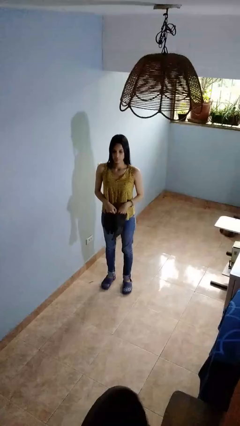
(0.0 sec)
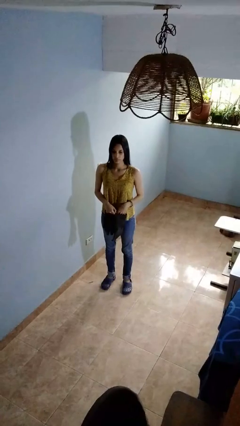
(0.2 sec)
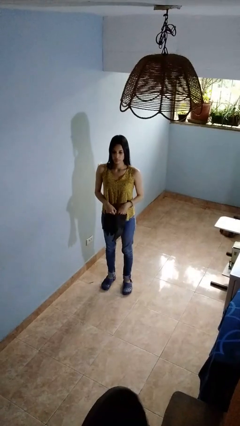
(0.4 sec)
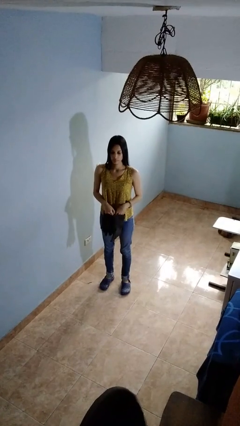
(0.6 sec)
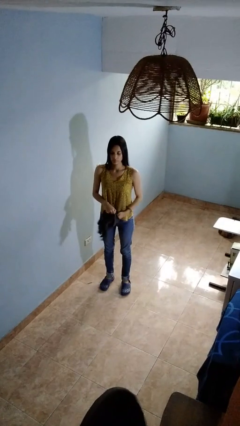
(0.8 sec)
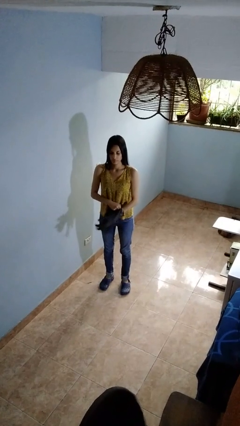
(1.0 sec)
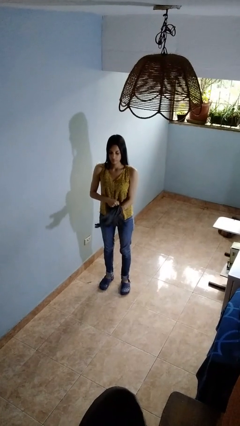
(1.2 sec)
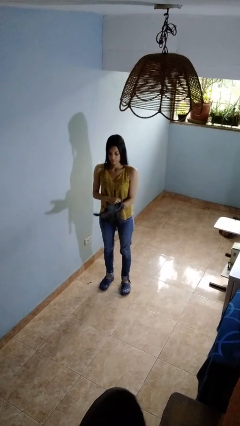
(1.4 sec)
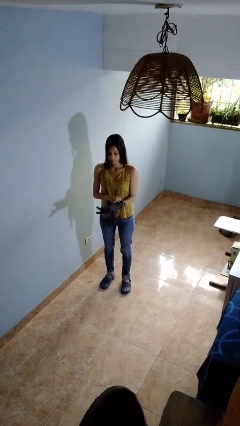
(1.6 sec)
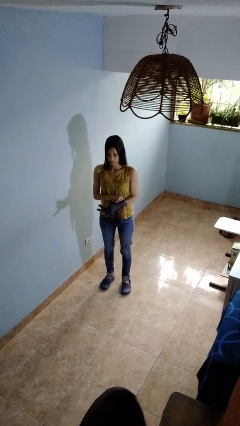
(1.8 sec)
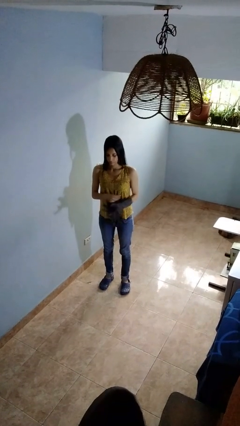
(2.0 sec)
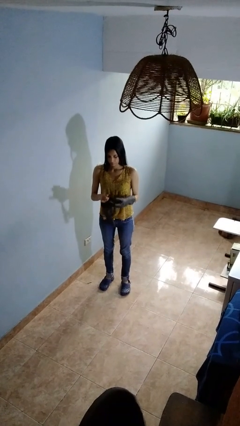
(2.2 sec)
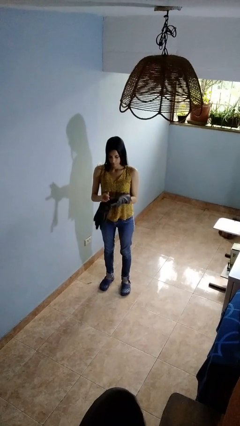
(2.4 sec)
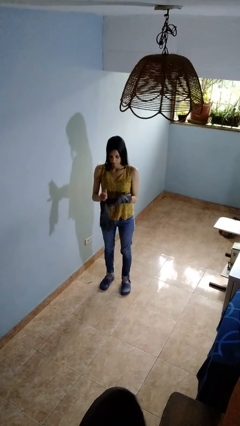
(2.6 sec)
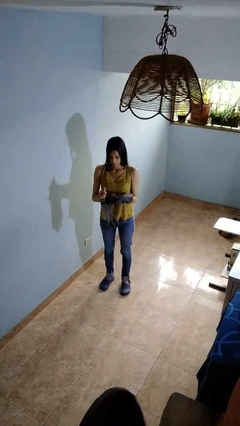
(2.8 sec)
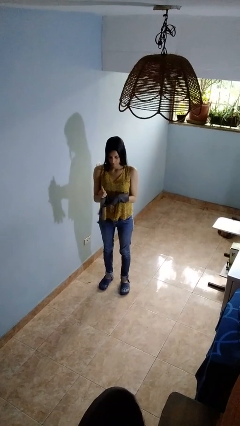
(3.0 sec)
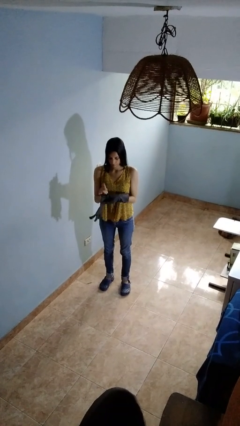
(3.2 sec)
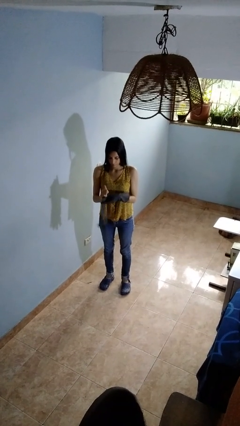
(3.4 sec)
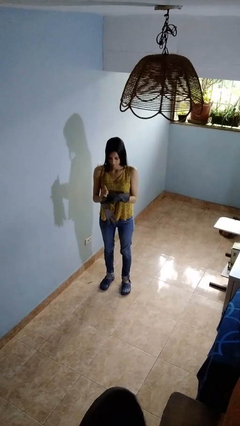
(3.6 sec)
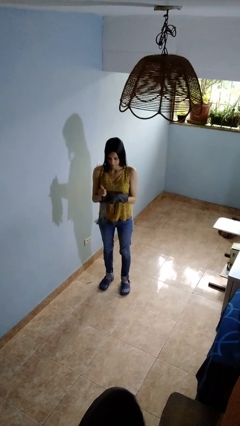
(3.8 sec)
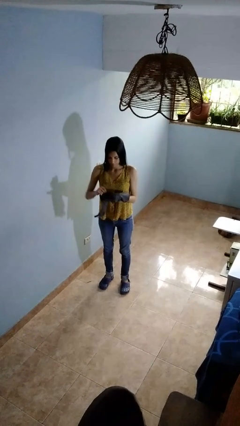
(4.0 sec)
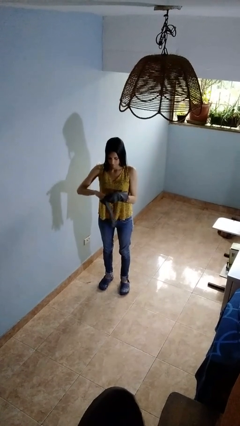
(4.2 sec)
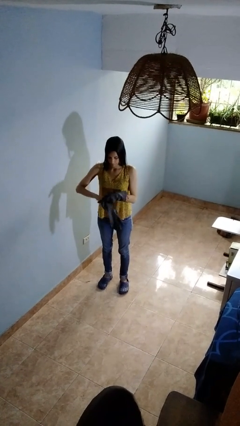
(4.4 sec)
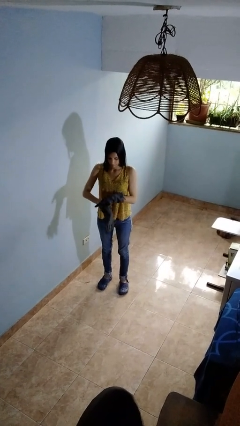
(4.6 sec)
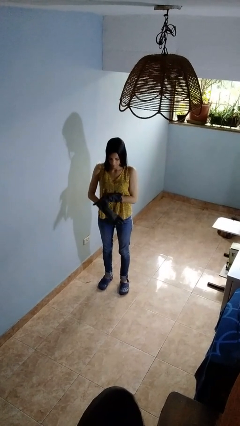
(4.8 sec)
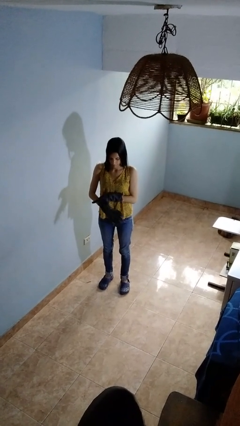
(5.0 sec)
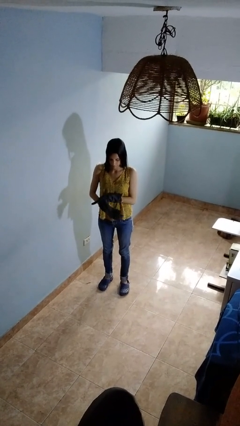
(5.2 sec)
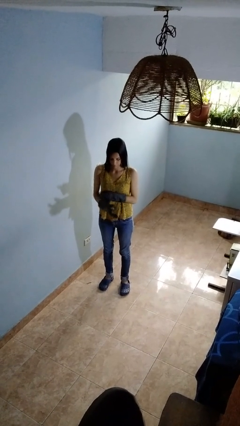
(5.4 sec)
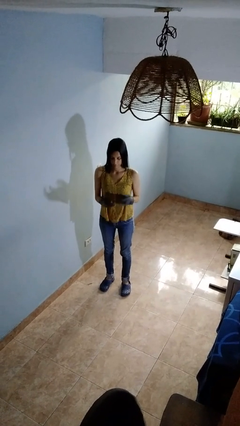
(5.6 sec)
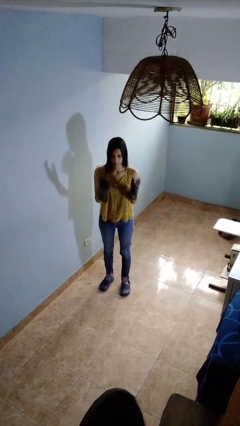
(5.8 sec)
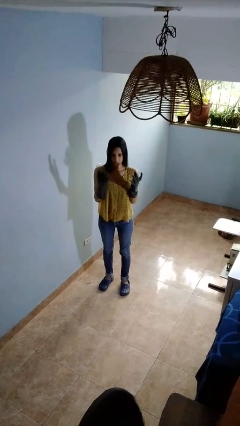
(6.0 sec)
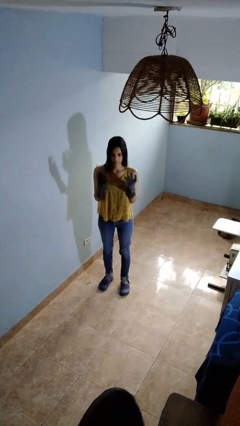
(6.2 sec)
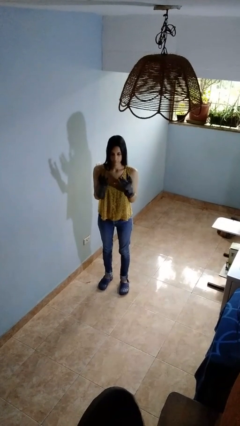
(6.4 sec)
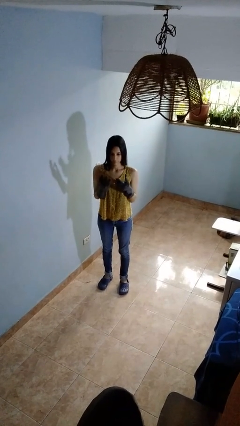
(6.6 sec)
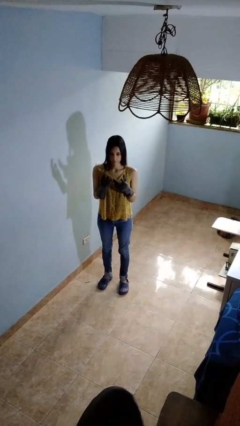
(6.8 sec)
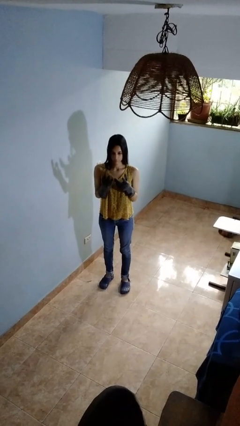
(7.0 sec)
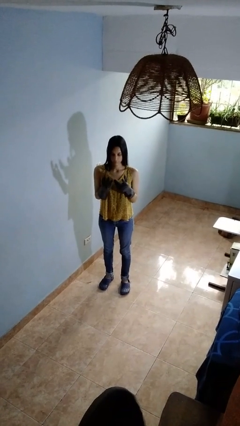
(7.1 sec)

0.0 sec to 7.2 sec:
person puts on gloves

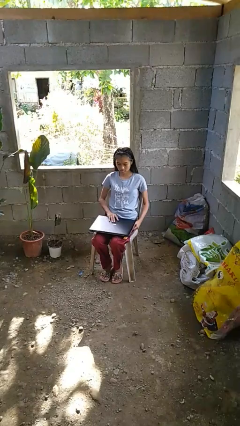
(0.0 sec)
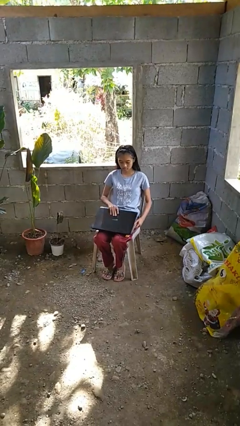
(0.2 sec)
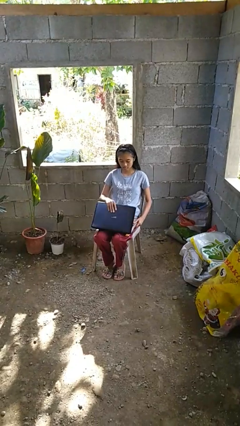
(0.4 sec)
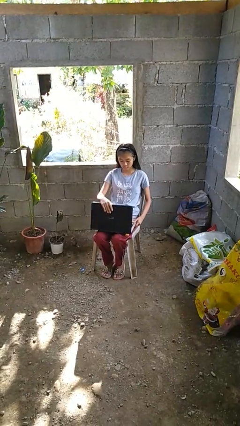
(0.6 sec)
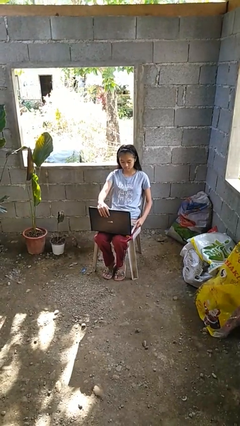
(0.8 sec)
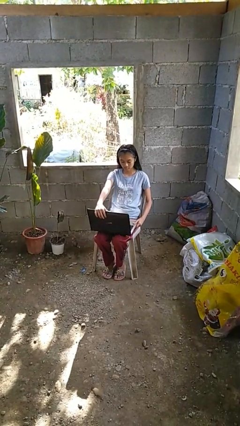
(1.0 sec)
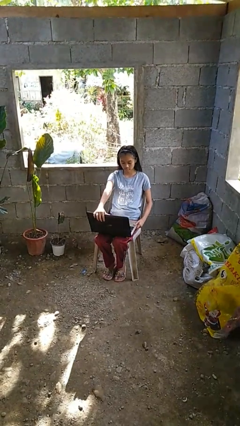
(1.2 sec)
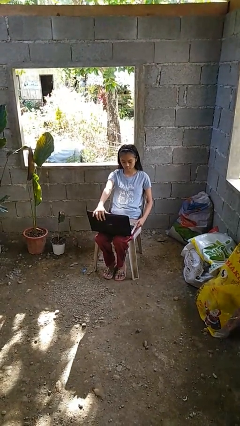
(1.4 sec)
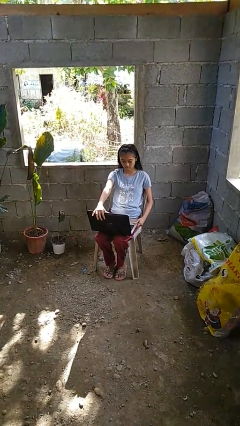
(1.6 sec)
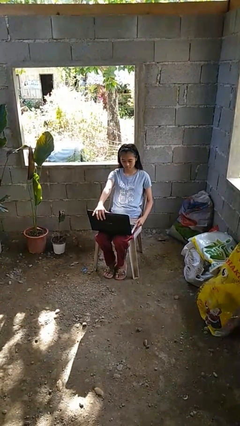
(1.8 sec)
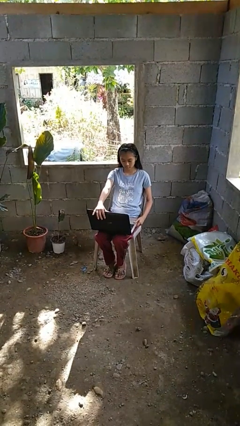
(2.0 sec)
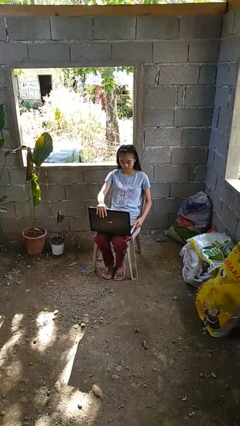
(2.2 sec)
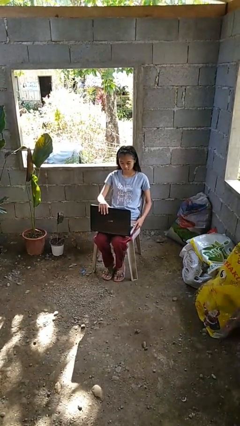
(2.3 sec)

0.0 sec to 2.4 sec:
person opens laptop

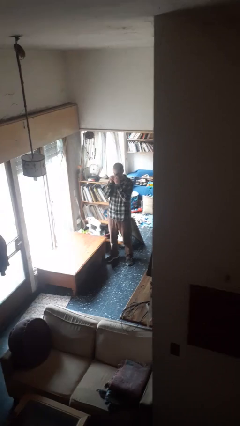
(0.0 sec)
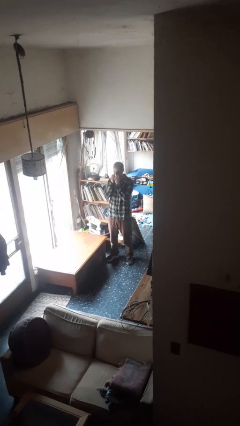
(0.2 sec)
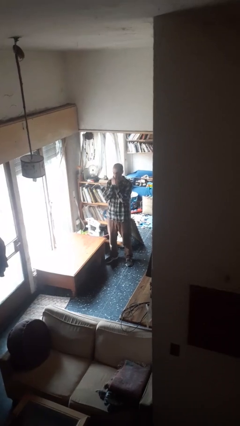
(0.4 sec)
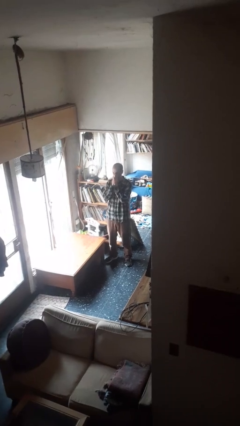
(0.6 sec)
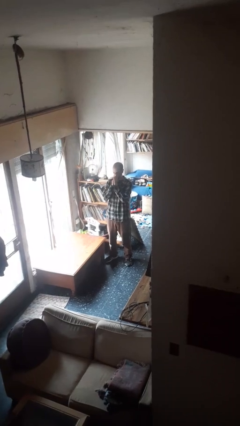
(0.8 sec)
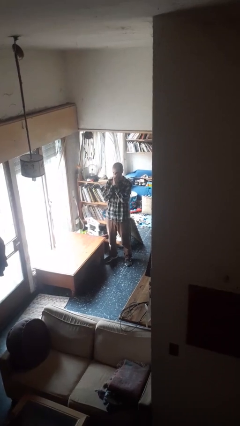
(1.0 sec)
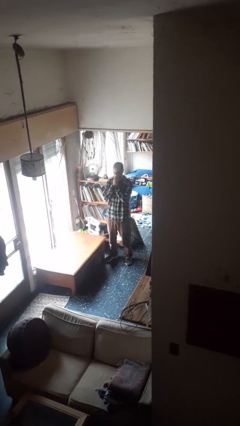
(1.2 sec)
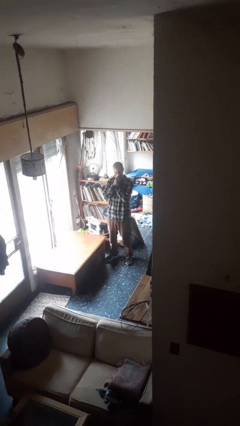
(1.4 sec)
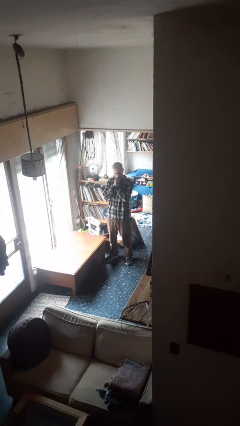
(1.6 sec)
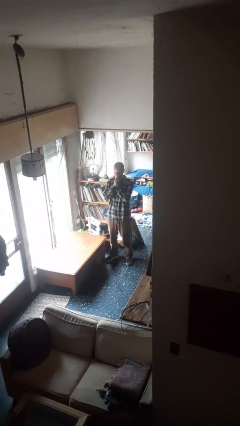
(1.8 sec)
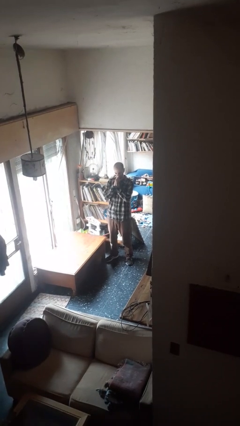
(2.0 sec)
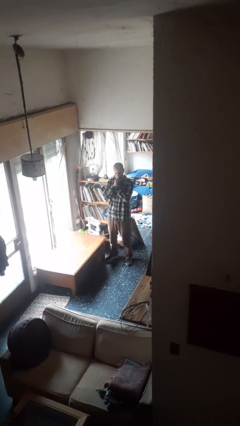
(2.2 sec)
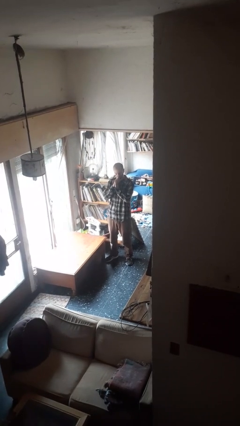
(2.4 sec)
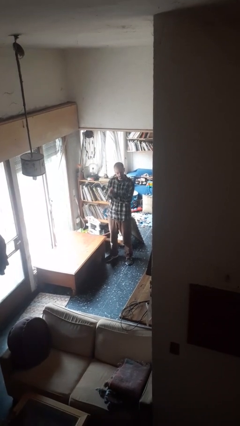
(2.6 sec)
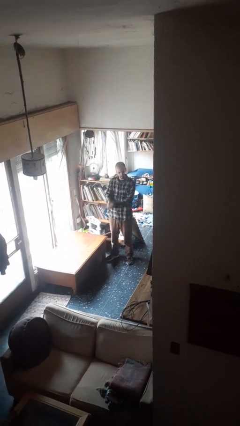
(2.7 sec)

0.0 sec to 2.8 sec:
person blows nose

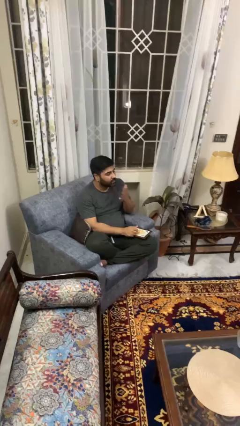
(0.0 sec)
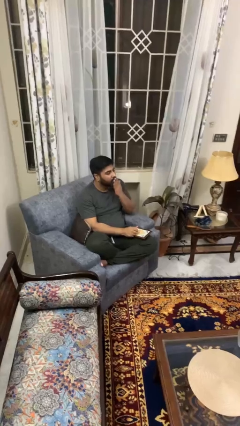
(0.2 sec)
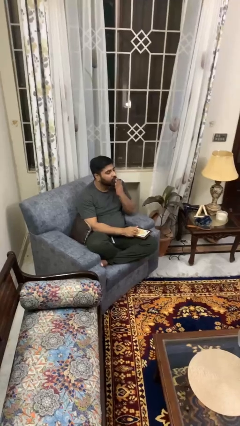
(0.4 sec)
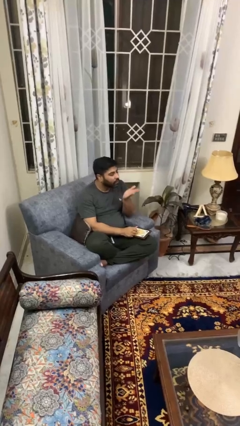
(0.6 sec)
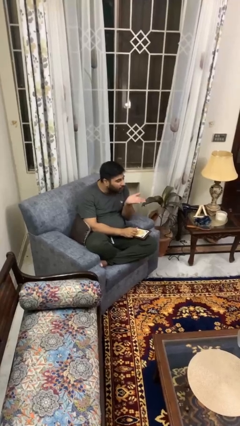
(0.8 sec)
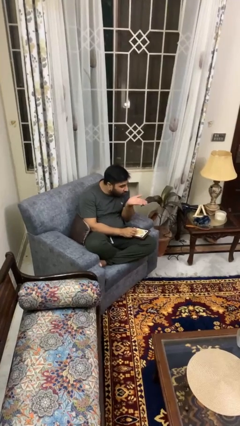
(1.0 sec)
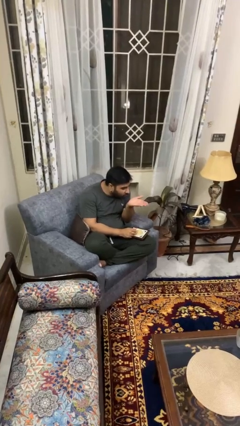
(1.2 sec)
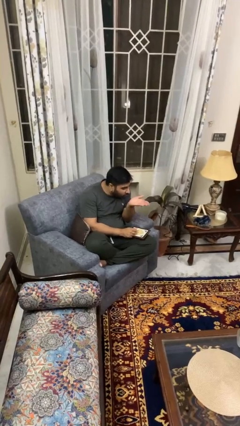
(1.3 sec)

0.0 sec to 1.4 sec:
person gestures blow kiss

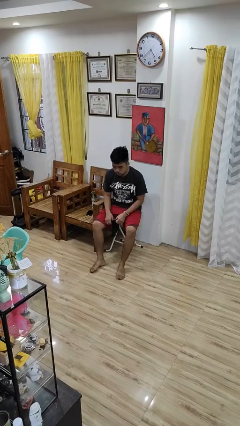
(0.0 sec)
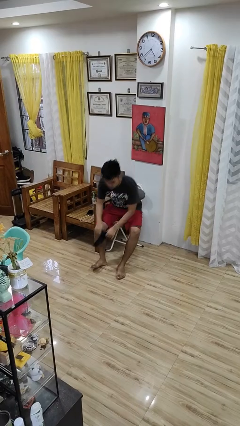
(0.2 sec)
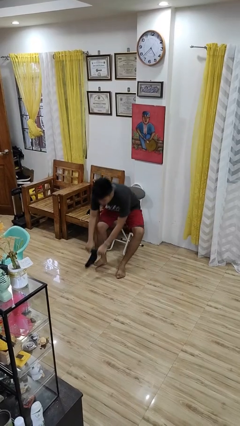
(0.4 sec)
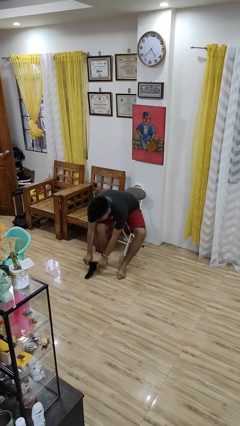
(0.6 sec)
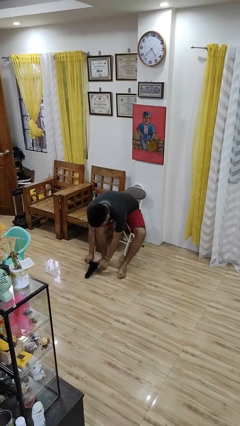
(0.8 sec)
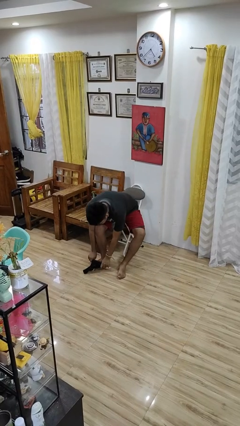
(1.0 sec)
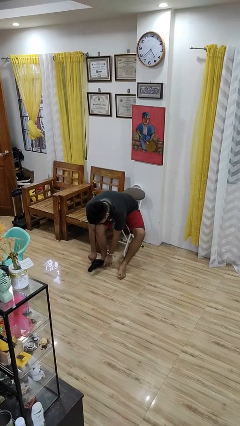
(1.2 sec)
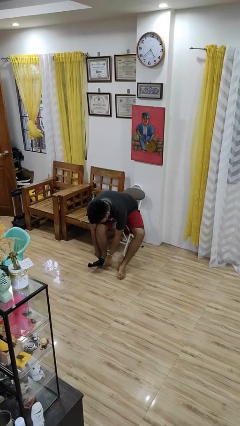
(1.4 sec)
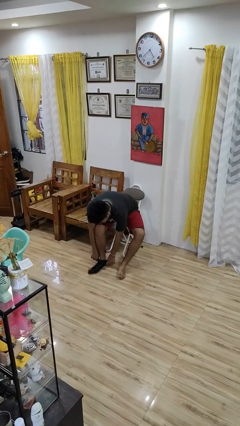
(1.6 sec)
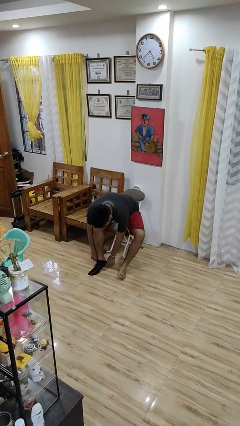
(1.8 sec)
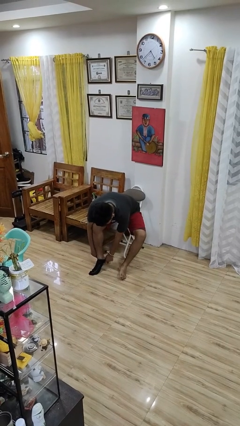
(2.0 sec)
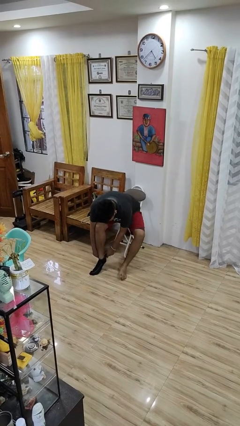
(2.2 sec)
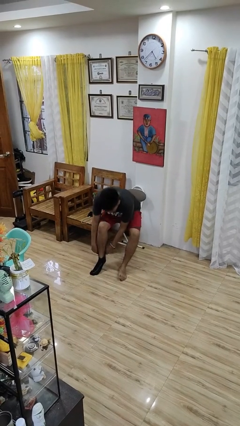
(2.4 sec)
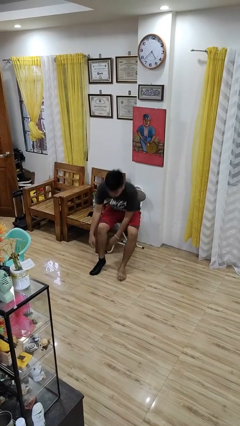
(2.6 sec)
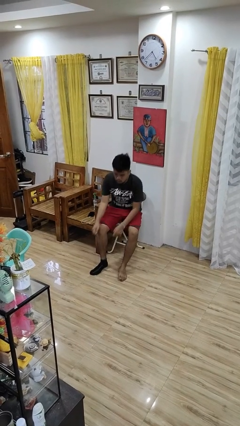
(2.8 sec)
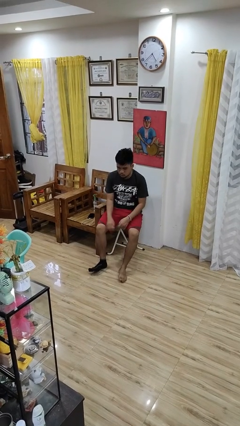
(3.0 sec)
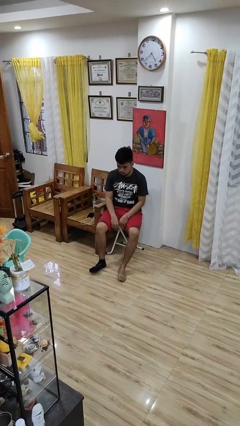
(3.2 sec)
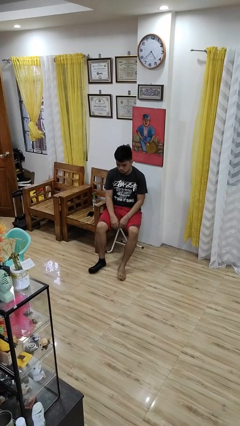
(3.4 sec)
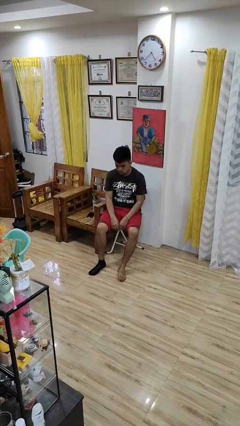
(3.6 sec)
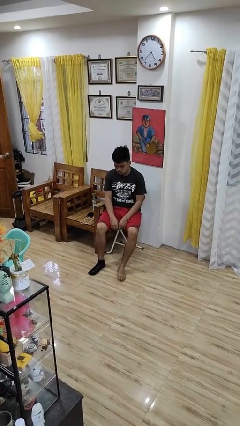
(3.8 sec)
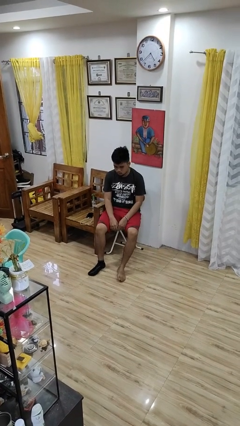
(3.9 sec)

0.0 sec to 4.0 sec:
person puts on socks
